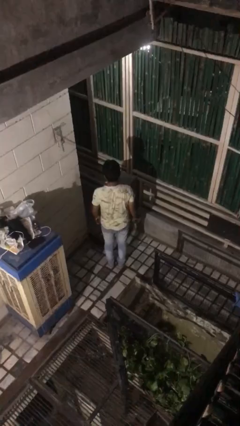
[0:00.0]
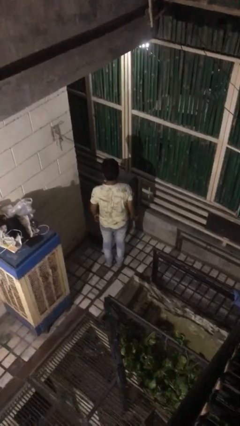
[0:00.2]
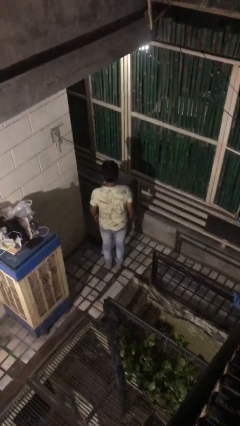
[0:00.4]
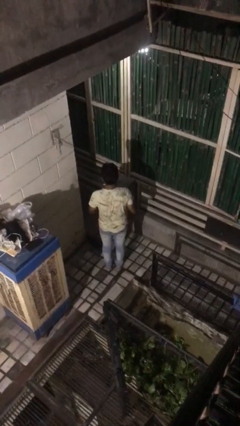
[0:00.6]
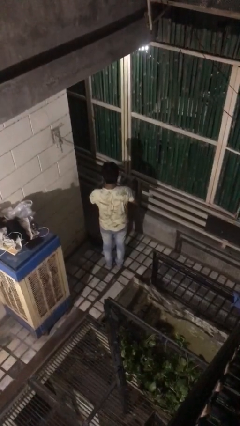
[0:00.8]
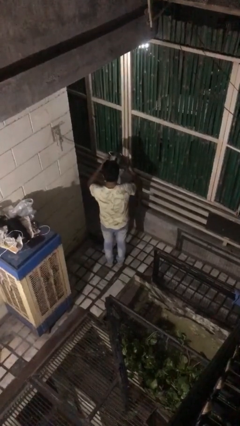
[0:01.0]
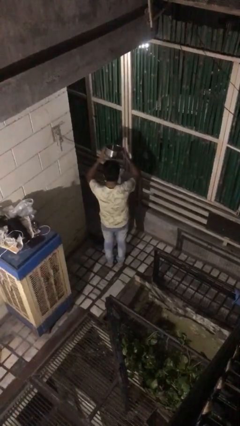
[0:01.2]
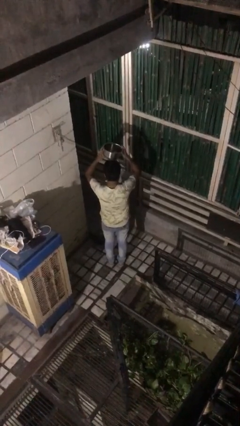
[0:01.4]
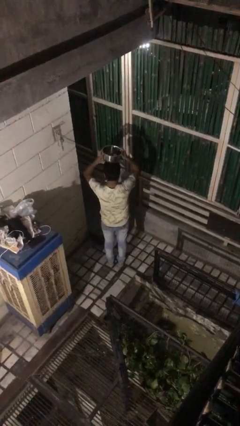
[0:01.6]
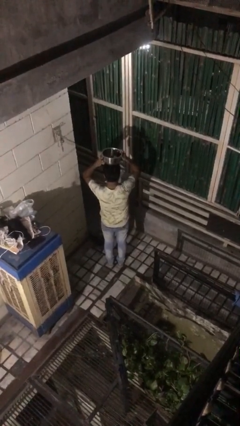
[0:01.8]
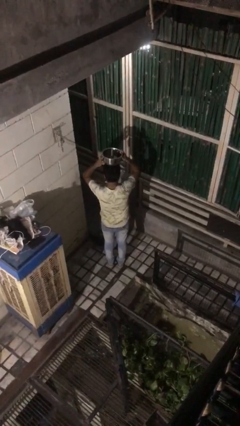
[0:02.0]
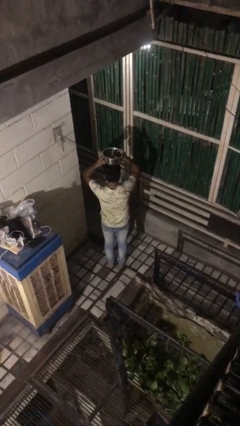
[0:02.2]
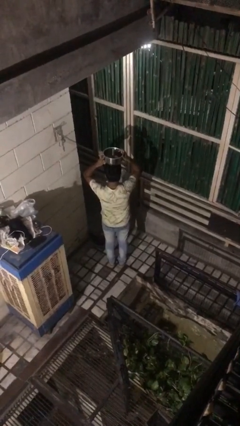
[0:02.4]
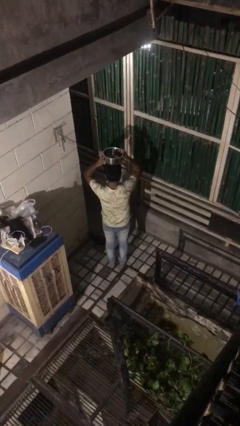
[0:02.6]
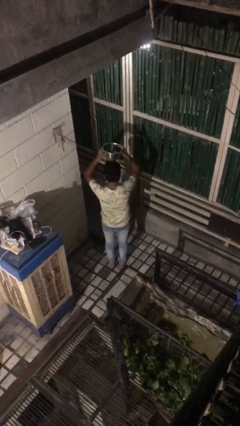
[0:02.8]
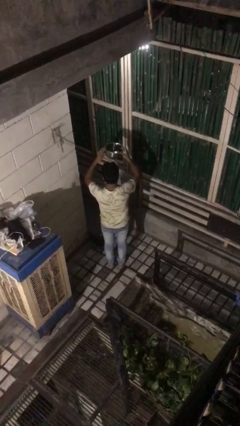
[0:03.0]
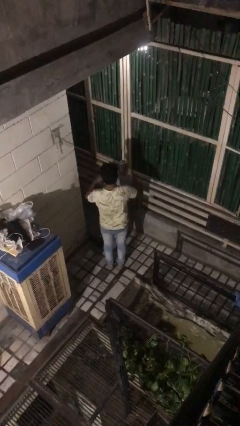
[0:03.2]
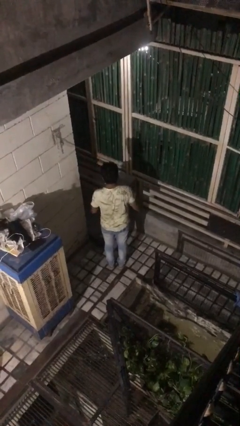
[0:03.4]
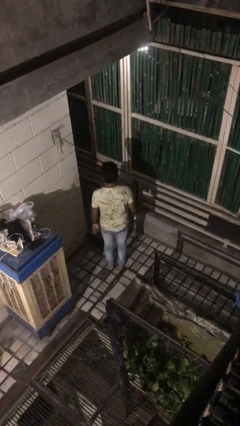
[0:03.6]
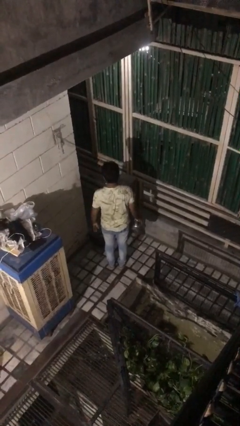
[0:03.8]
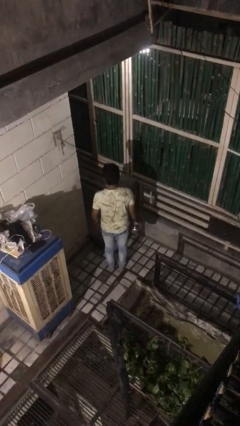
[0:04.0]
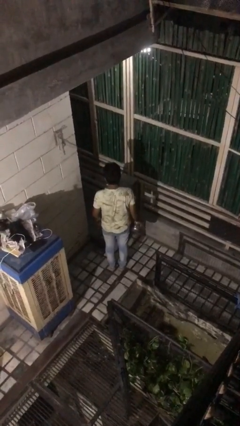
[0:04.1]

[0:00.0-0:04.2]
person holds object above head

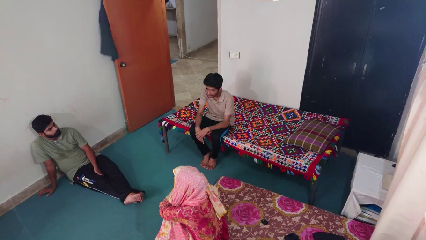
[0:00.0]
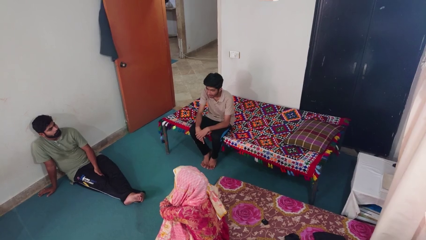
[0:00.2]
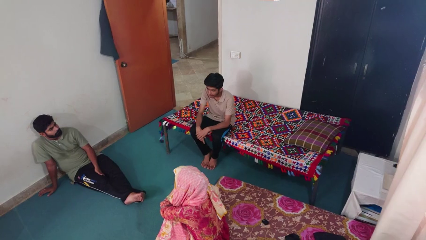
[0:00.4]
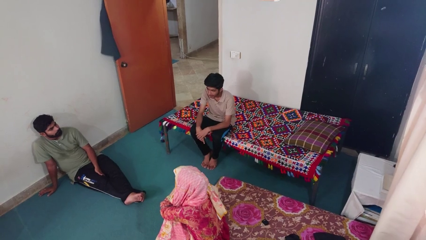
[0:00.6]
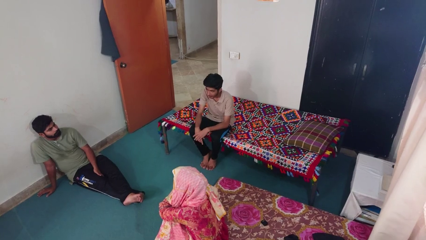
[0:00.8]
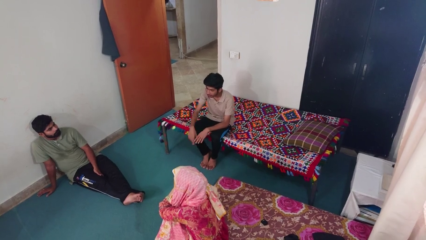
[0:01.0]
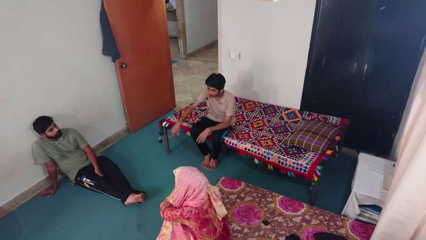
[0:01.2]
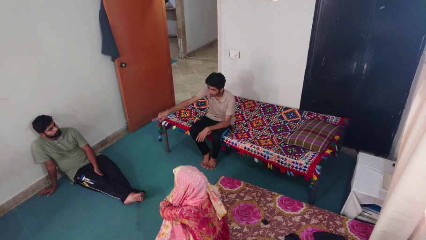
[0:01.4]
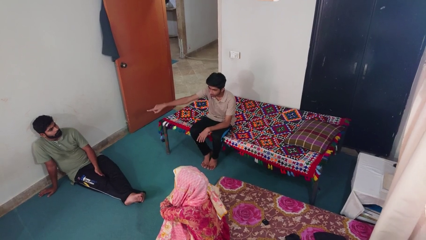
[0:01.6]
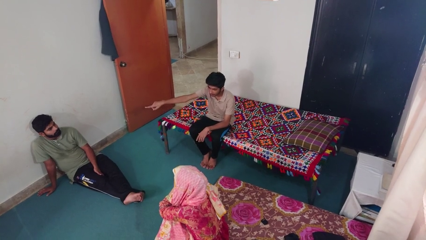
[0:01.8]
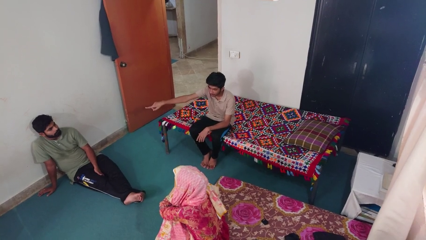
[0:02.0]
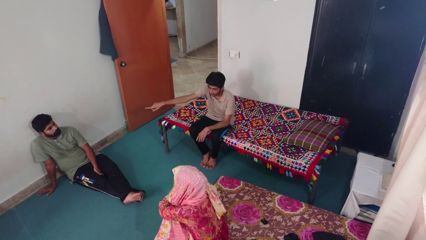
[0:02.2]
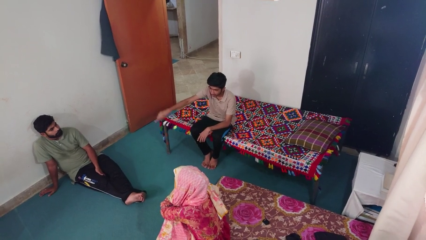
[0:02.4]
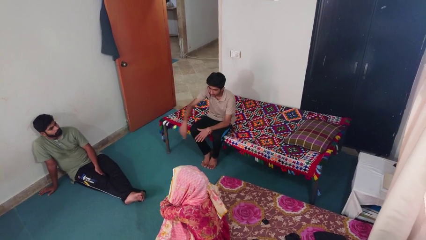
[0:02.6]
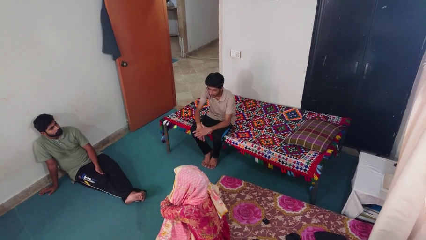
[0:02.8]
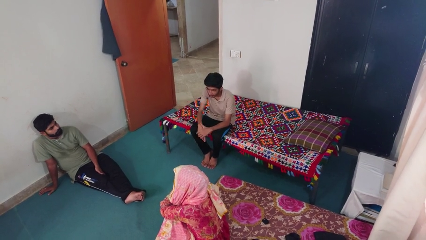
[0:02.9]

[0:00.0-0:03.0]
person points at person

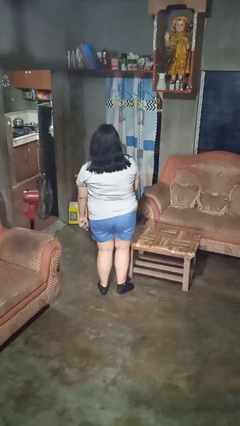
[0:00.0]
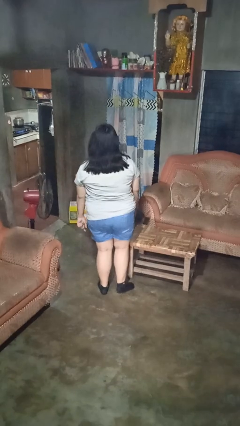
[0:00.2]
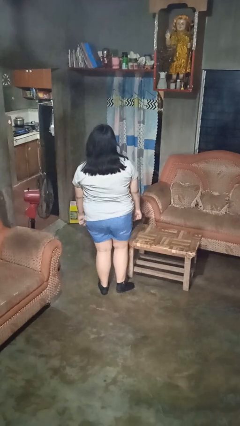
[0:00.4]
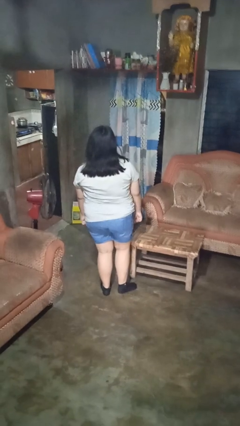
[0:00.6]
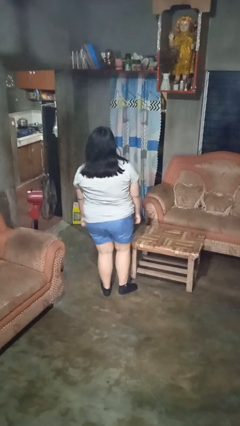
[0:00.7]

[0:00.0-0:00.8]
person bumps into table

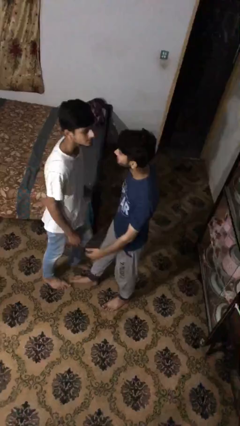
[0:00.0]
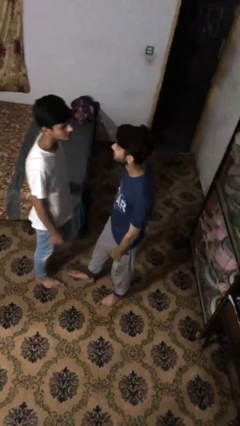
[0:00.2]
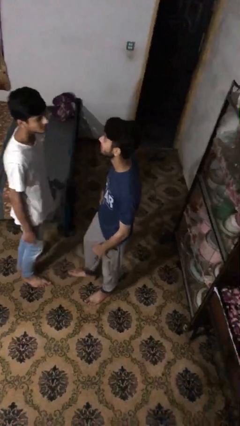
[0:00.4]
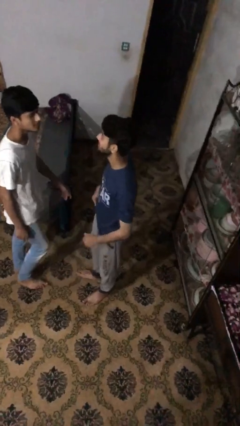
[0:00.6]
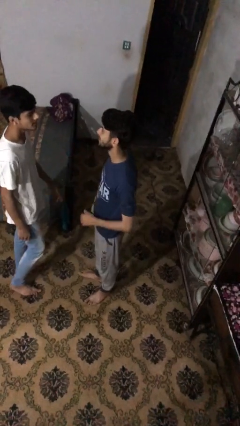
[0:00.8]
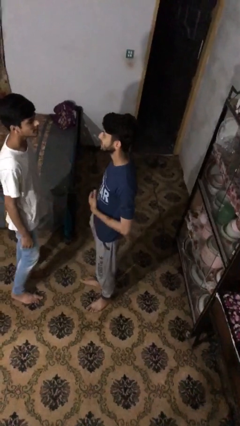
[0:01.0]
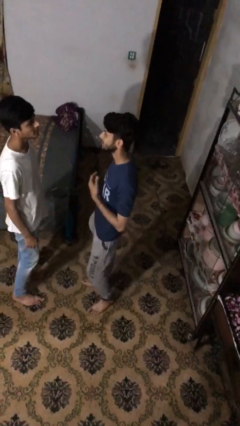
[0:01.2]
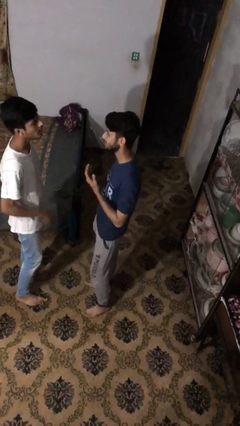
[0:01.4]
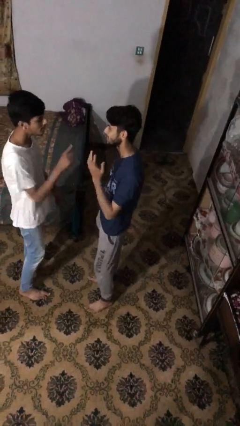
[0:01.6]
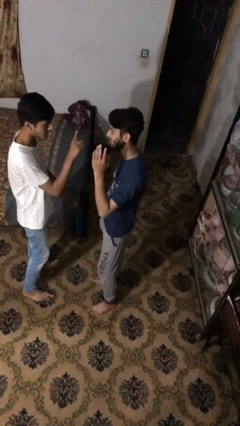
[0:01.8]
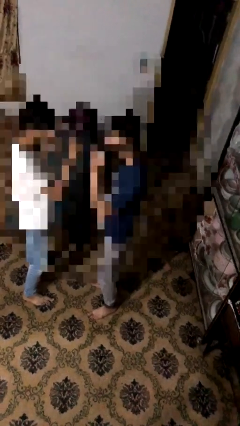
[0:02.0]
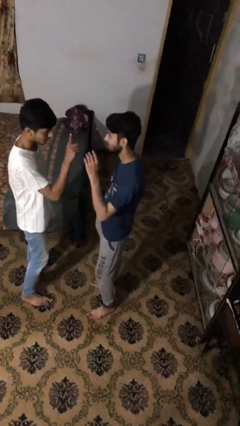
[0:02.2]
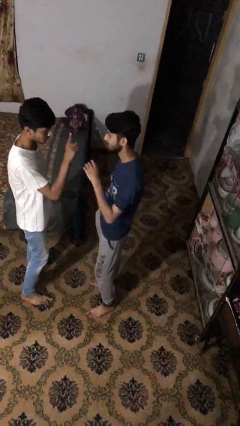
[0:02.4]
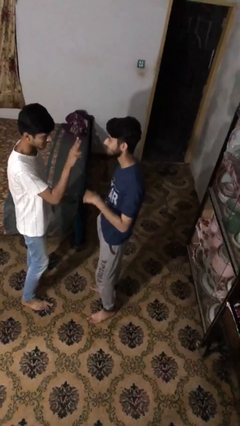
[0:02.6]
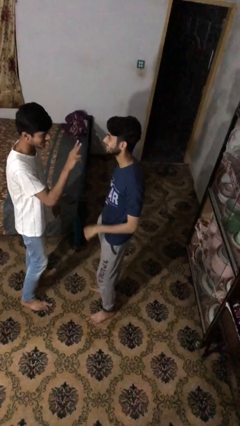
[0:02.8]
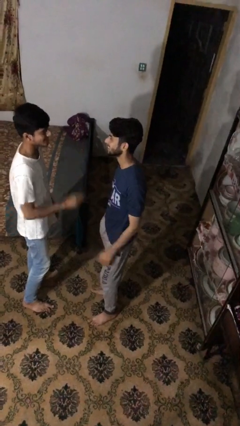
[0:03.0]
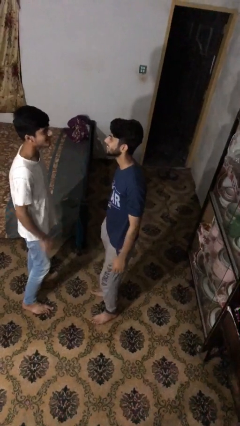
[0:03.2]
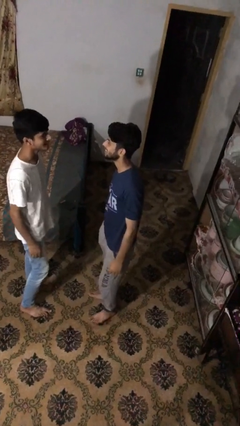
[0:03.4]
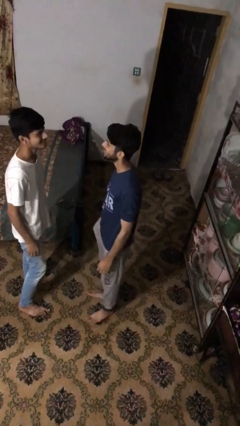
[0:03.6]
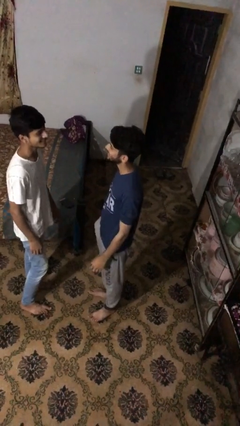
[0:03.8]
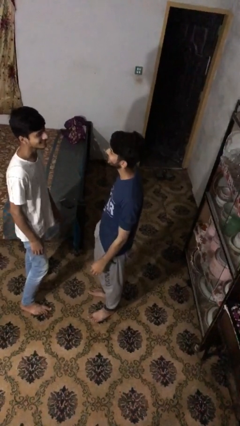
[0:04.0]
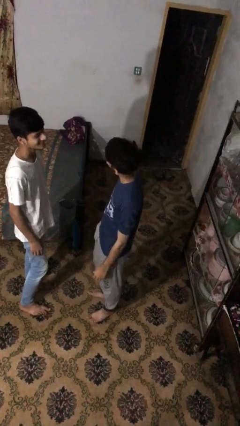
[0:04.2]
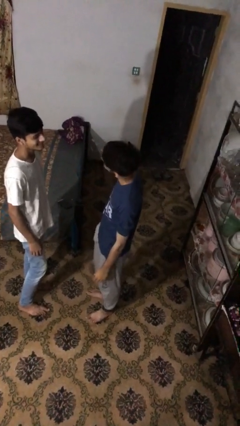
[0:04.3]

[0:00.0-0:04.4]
person talks to person

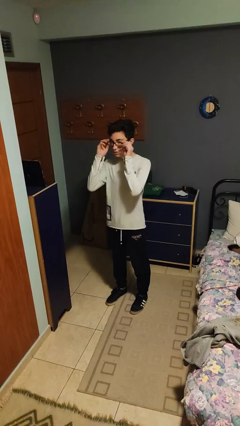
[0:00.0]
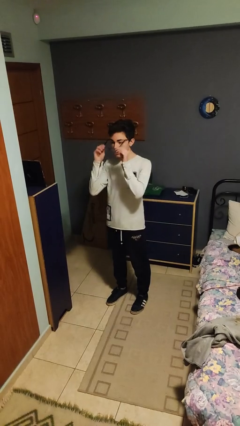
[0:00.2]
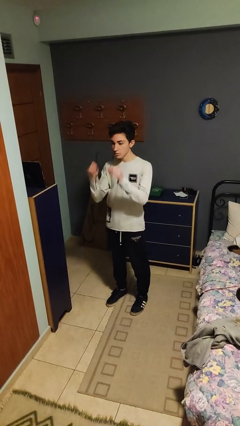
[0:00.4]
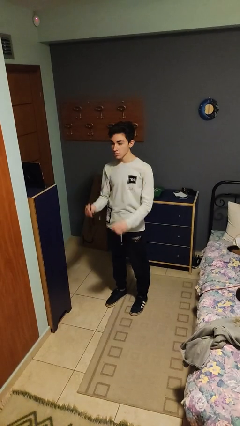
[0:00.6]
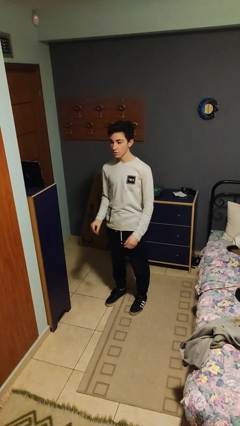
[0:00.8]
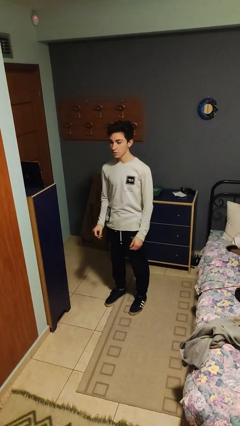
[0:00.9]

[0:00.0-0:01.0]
person takes off glasses

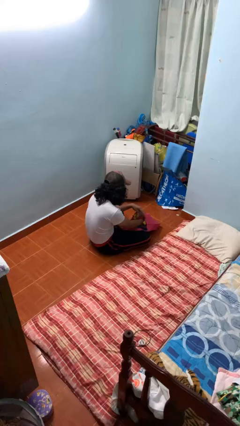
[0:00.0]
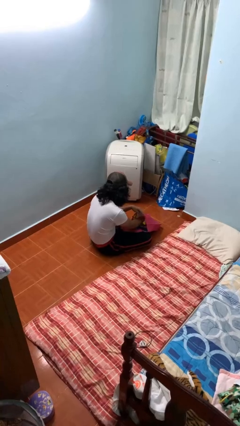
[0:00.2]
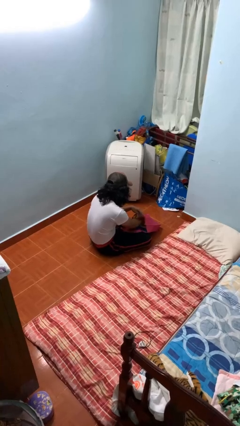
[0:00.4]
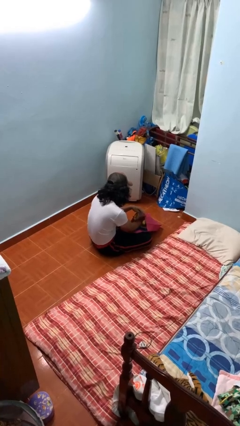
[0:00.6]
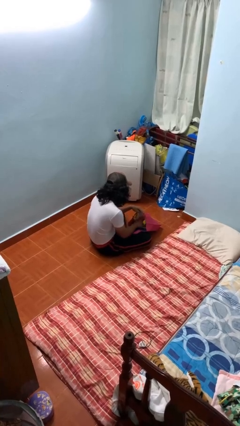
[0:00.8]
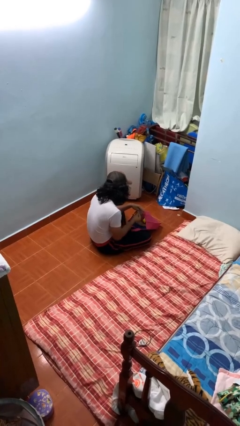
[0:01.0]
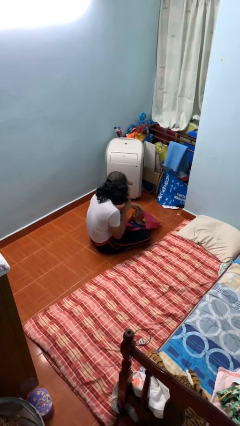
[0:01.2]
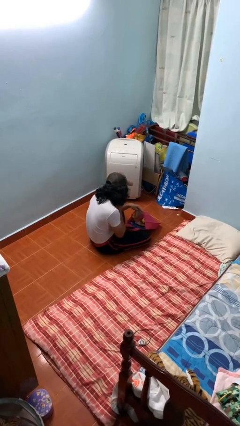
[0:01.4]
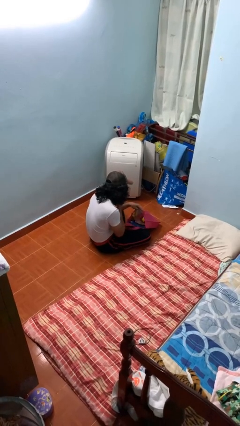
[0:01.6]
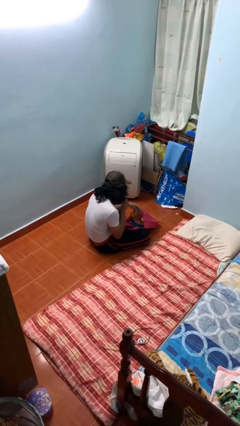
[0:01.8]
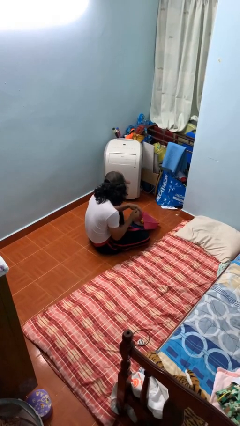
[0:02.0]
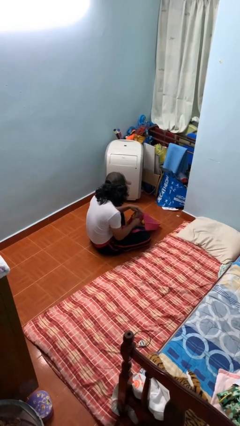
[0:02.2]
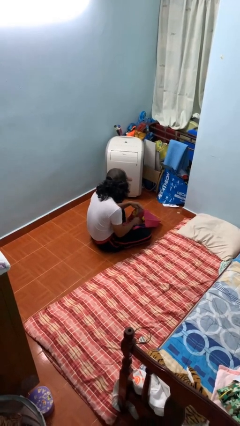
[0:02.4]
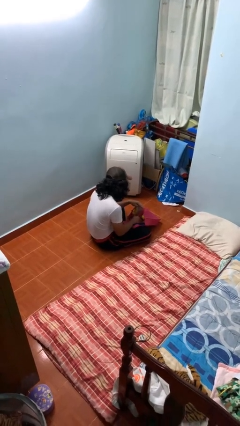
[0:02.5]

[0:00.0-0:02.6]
person eats snack from bag

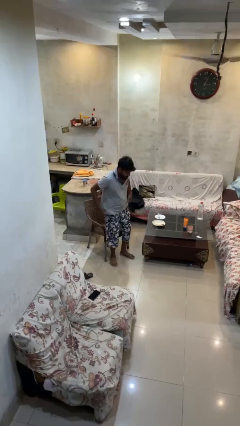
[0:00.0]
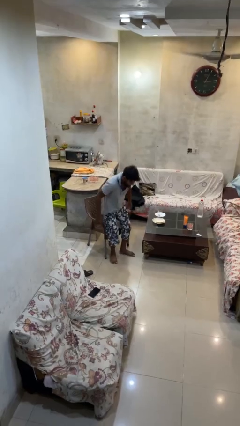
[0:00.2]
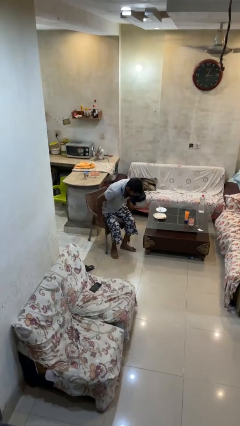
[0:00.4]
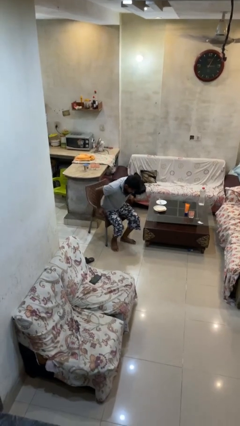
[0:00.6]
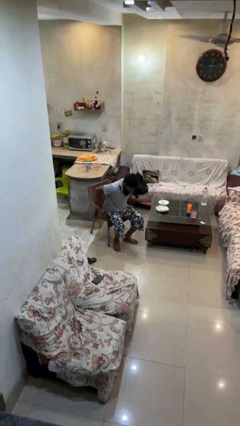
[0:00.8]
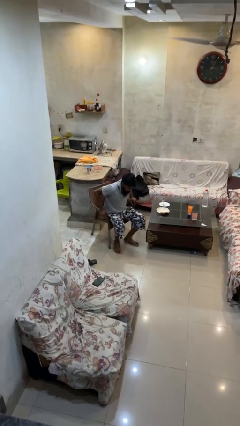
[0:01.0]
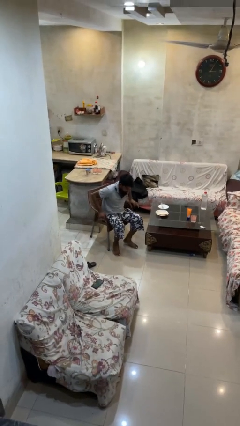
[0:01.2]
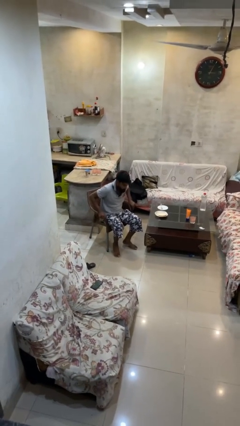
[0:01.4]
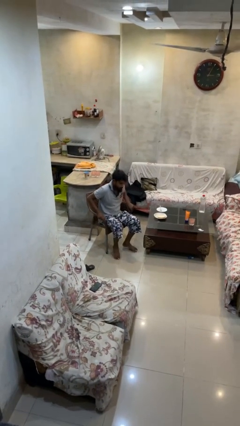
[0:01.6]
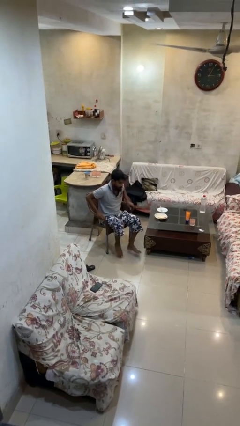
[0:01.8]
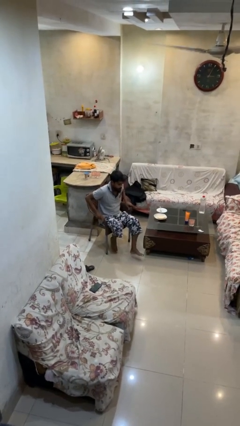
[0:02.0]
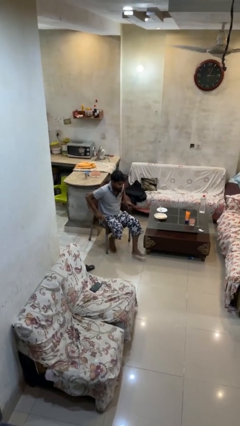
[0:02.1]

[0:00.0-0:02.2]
person sits down
